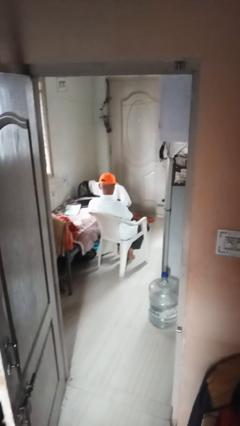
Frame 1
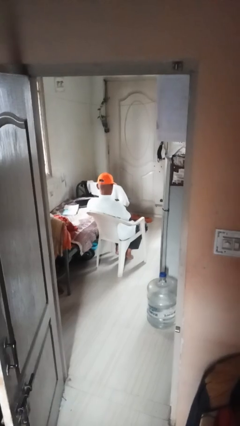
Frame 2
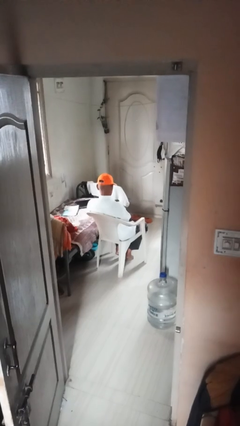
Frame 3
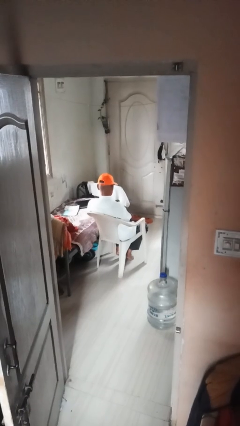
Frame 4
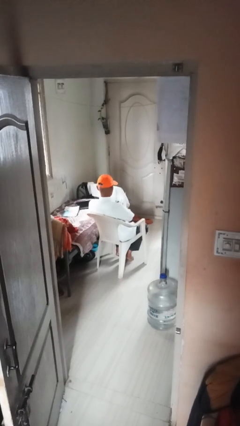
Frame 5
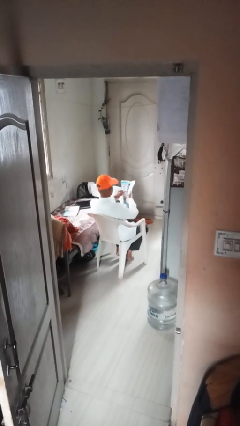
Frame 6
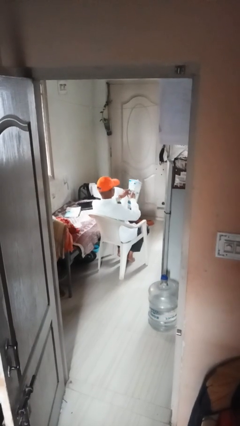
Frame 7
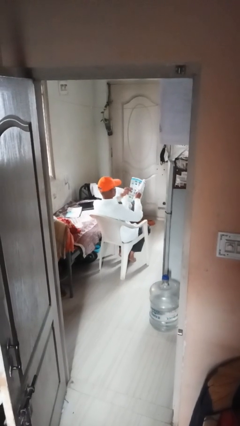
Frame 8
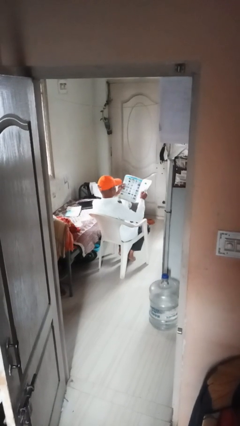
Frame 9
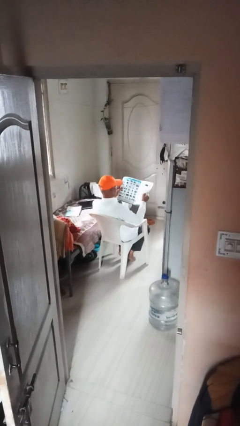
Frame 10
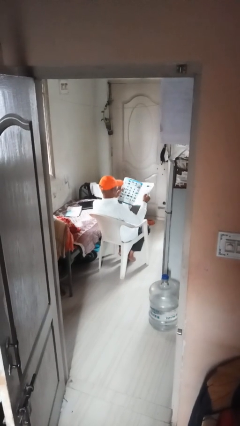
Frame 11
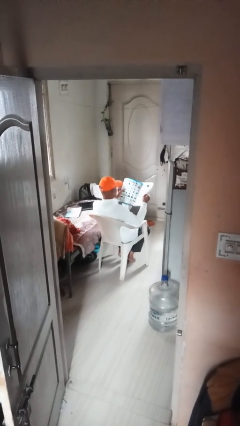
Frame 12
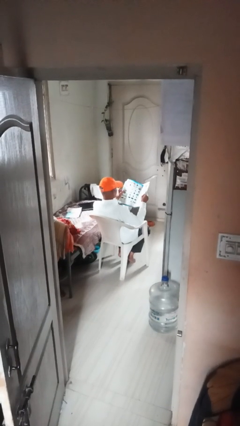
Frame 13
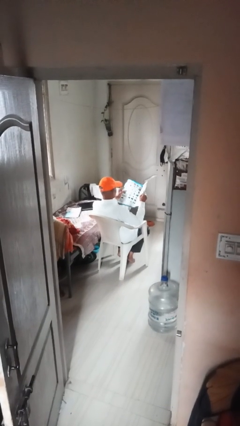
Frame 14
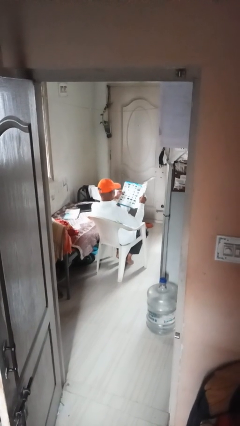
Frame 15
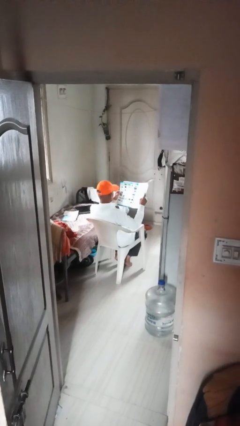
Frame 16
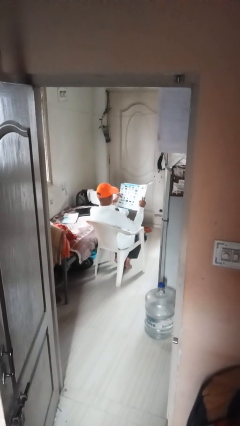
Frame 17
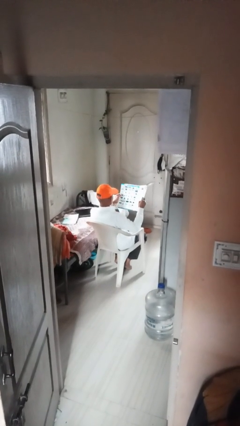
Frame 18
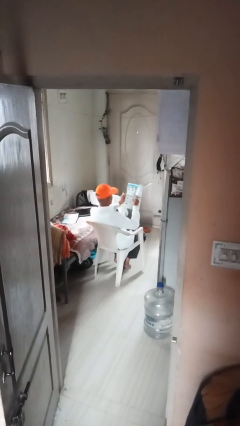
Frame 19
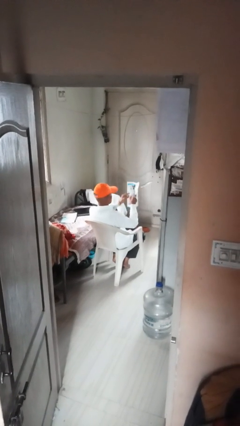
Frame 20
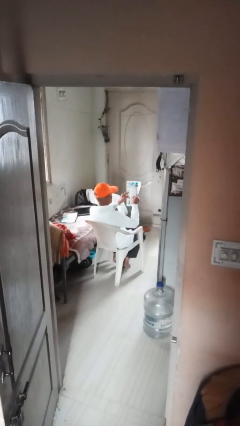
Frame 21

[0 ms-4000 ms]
person reads magazine

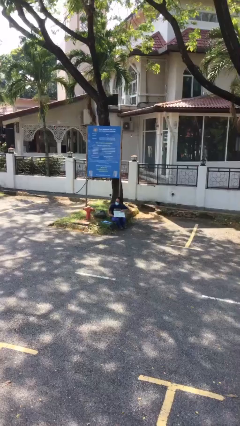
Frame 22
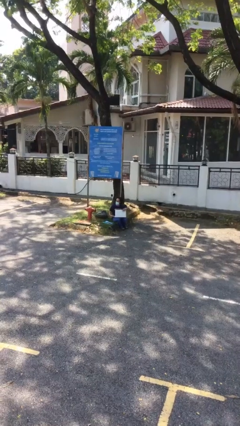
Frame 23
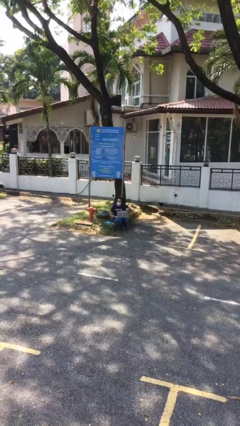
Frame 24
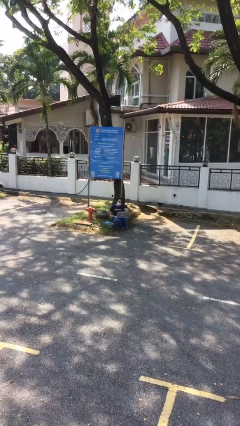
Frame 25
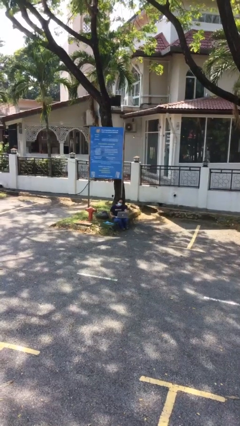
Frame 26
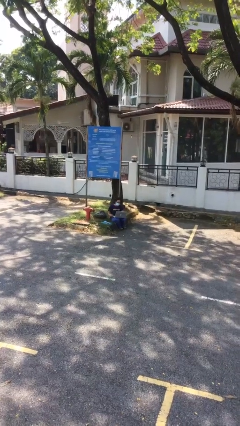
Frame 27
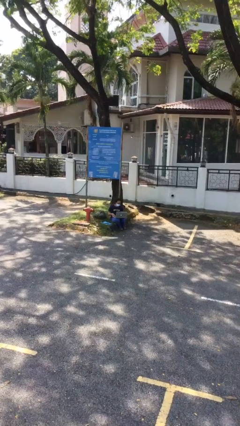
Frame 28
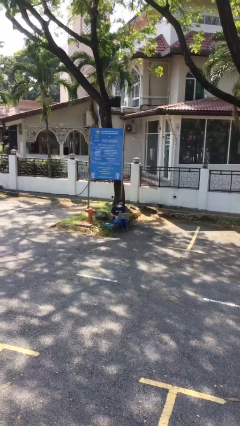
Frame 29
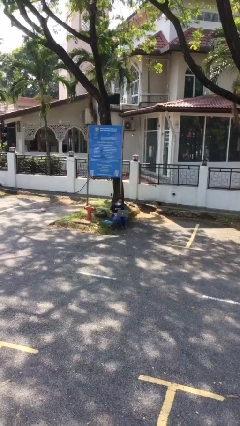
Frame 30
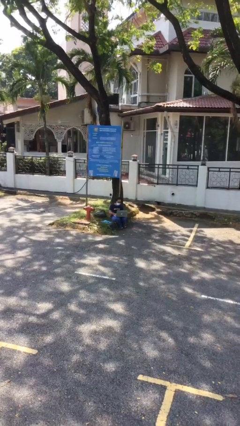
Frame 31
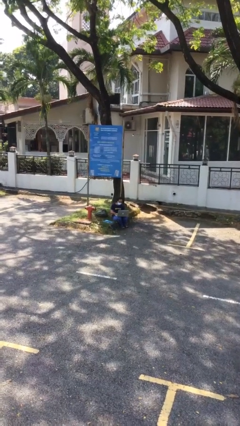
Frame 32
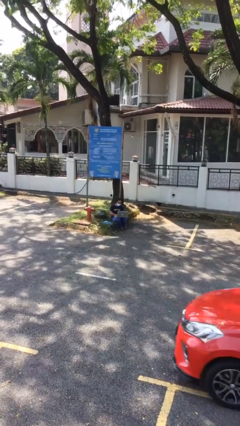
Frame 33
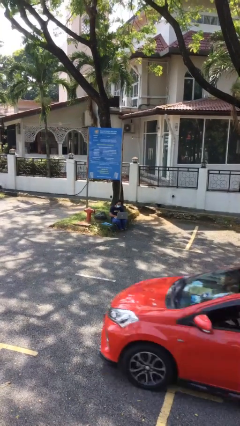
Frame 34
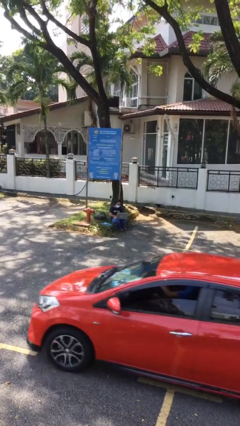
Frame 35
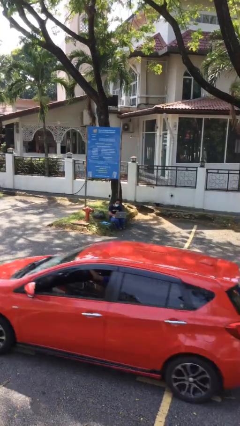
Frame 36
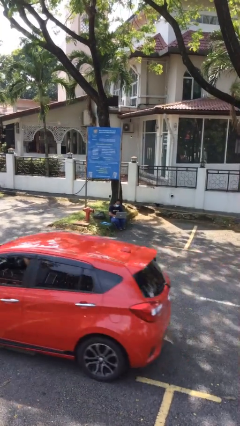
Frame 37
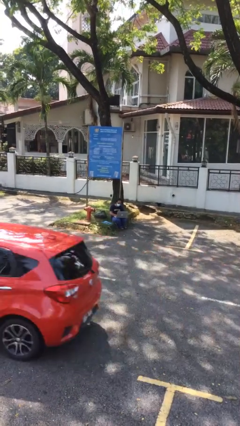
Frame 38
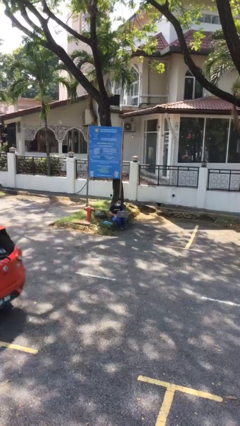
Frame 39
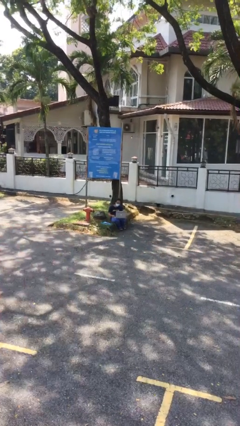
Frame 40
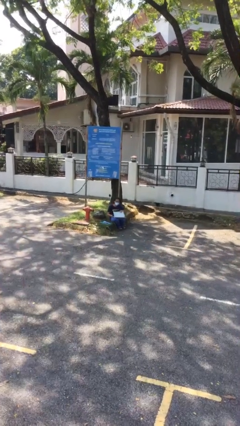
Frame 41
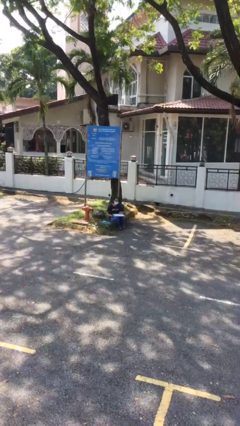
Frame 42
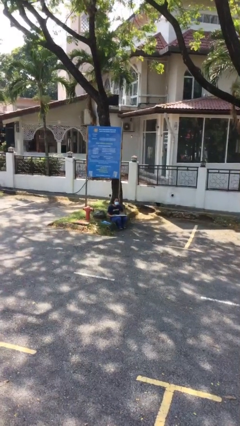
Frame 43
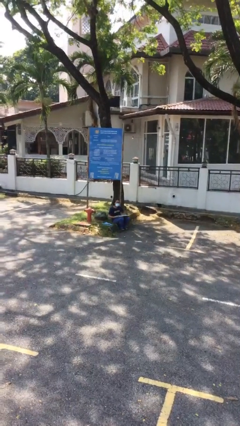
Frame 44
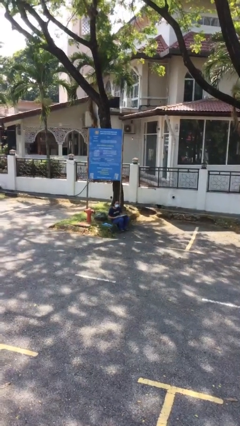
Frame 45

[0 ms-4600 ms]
person interacts with laptop

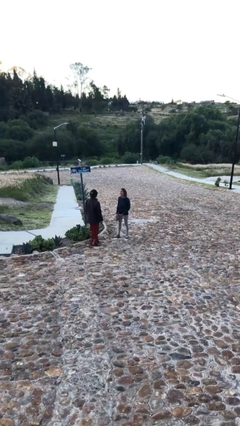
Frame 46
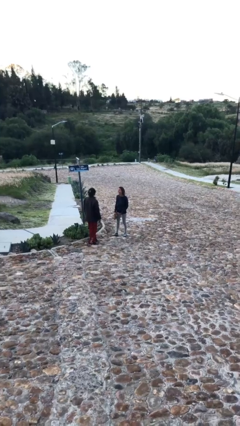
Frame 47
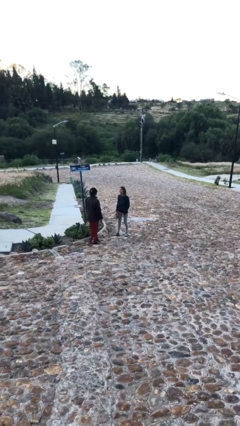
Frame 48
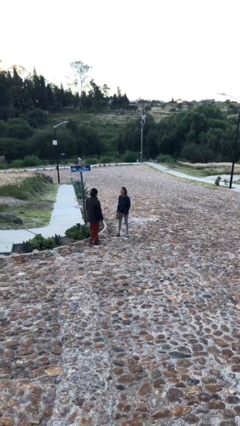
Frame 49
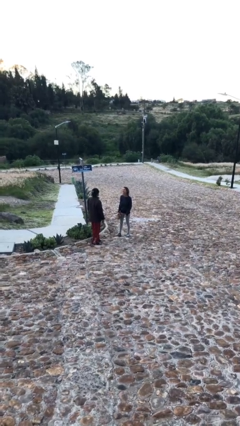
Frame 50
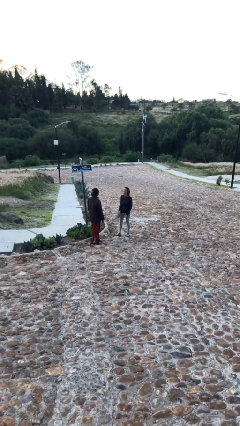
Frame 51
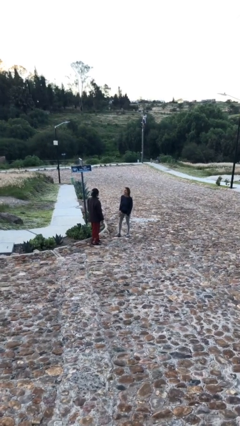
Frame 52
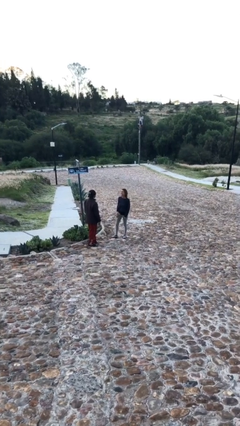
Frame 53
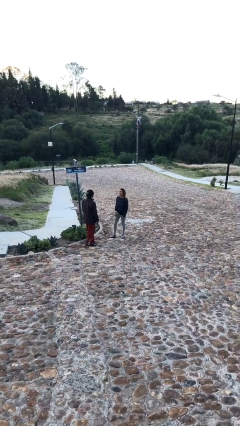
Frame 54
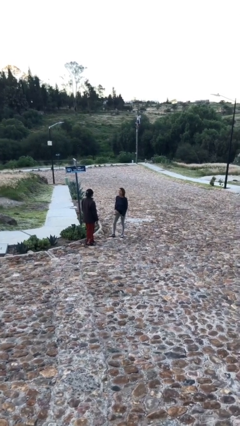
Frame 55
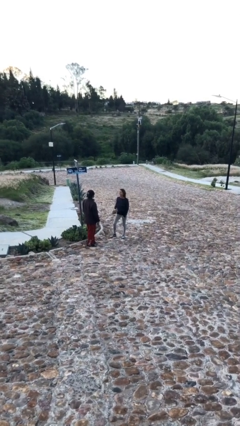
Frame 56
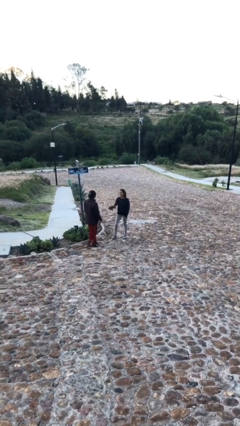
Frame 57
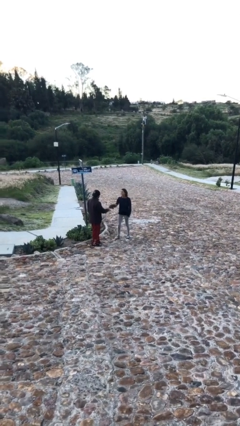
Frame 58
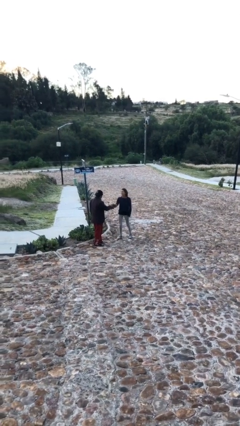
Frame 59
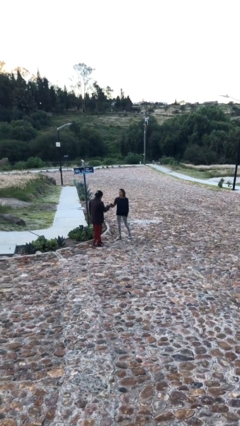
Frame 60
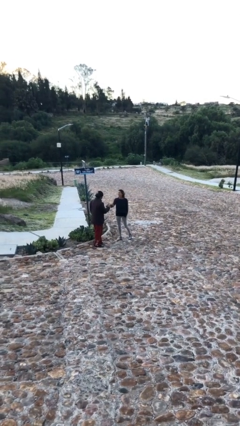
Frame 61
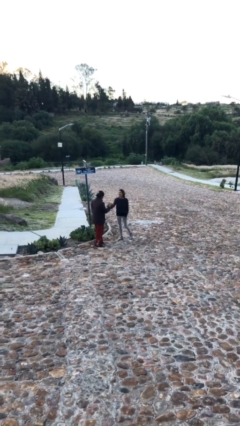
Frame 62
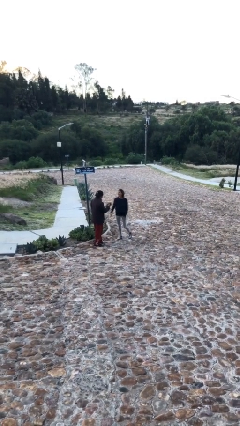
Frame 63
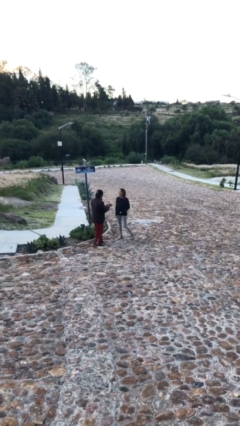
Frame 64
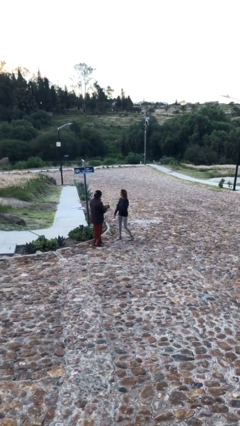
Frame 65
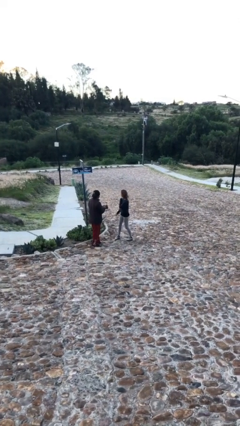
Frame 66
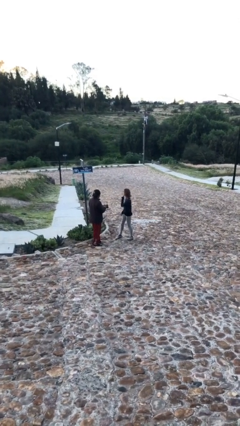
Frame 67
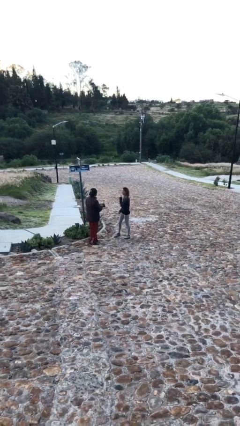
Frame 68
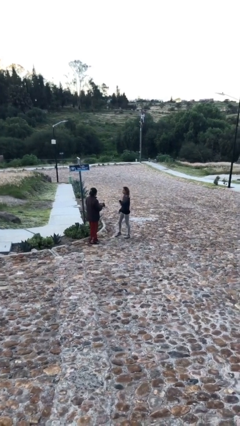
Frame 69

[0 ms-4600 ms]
person transfers object to person

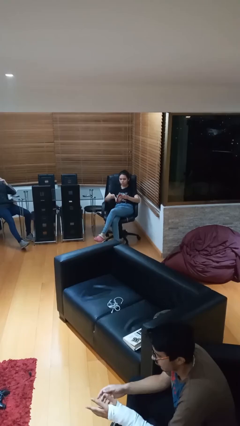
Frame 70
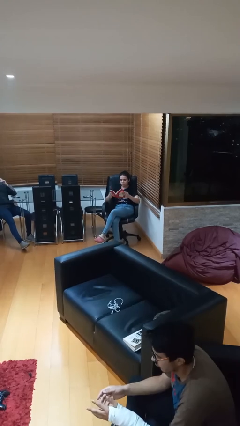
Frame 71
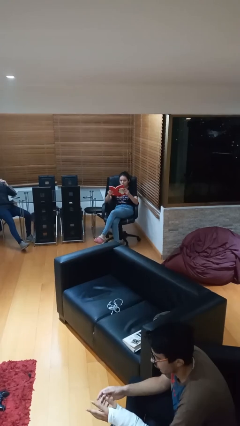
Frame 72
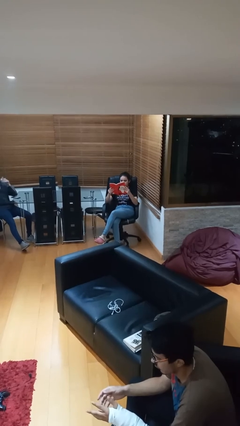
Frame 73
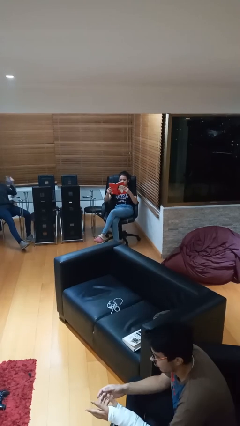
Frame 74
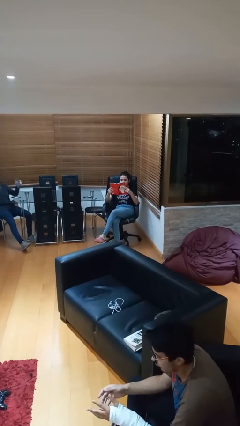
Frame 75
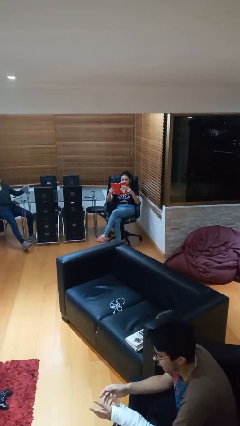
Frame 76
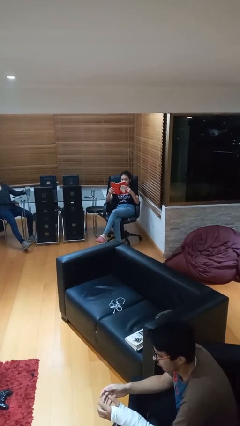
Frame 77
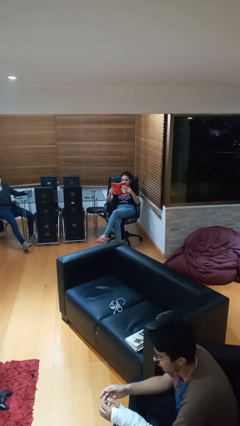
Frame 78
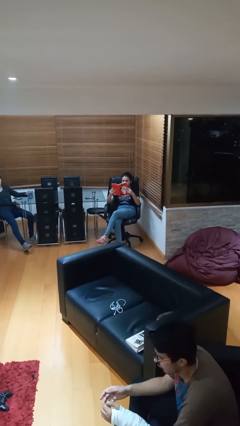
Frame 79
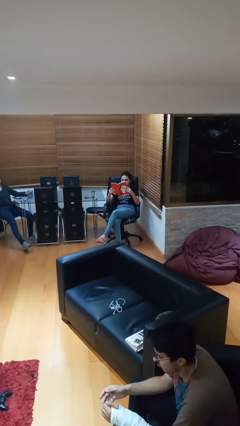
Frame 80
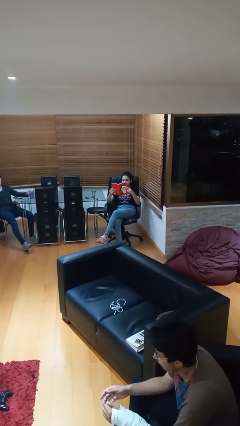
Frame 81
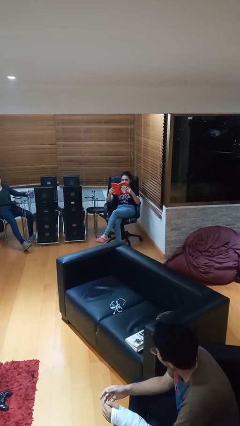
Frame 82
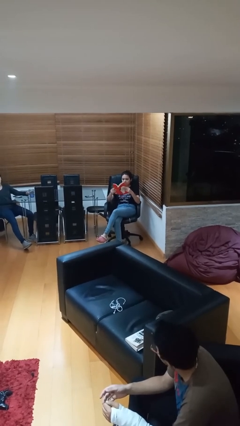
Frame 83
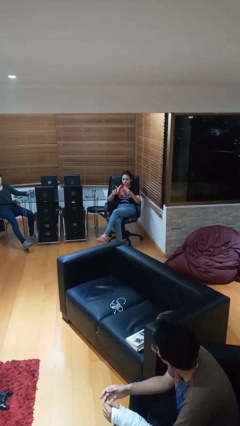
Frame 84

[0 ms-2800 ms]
person reads document

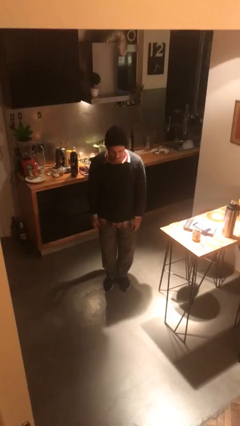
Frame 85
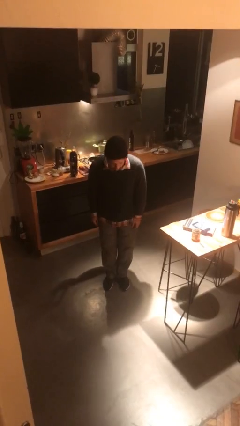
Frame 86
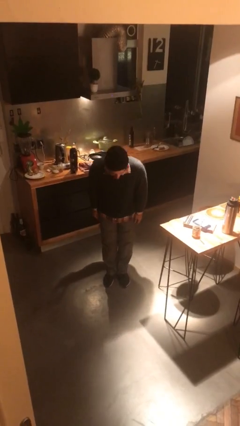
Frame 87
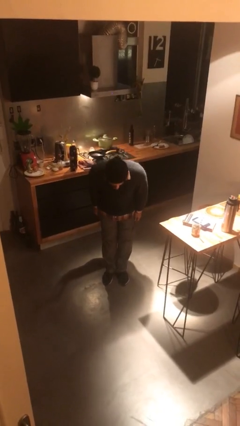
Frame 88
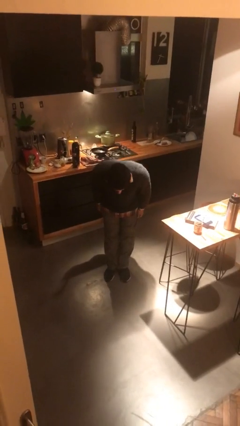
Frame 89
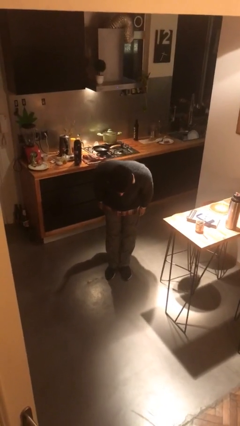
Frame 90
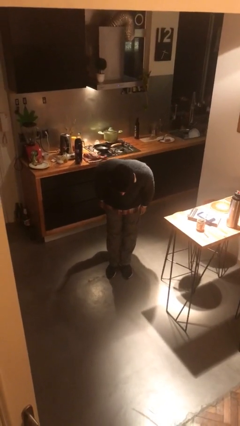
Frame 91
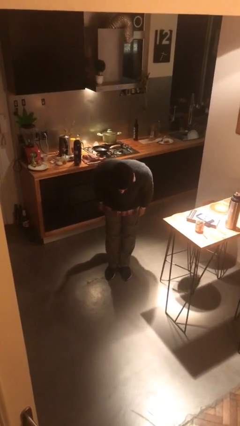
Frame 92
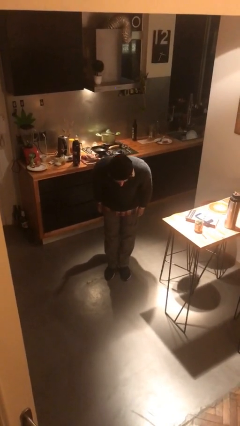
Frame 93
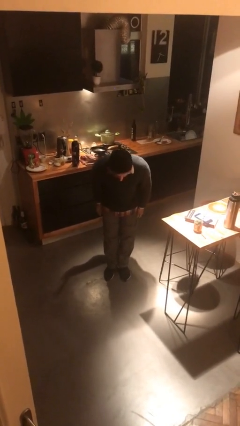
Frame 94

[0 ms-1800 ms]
person bows
